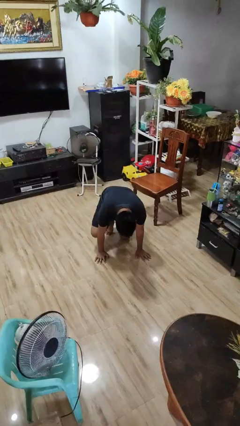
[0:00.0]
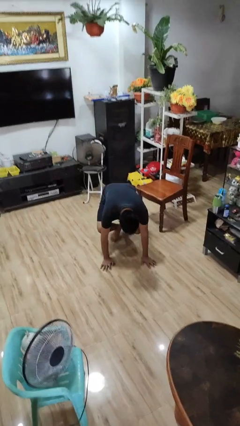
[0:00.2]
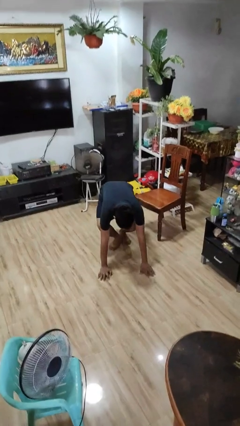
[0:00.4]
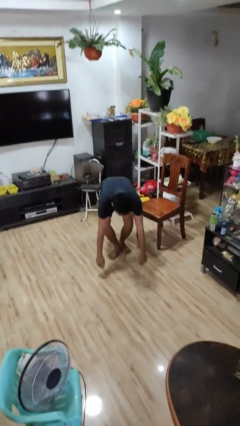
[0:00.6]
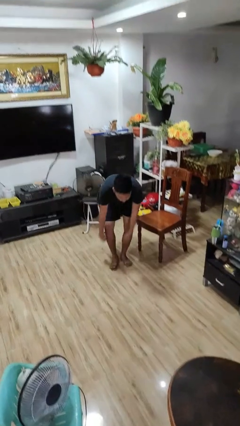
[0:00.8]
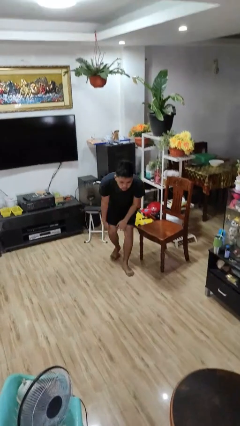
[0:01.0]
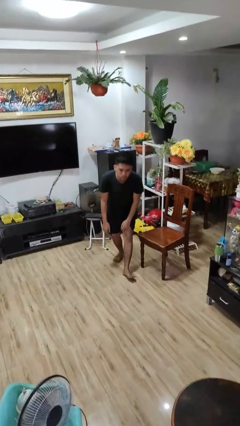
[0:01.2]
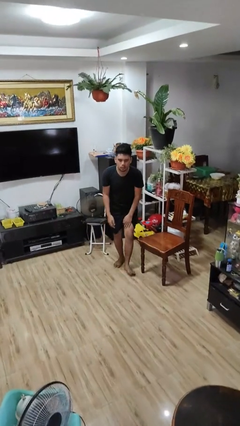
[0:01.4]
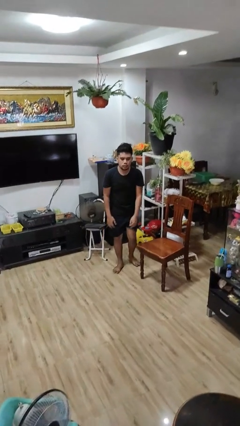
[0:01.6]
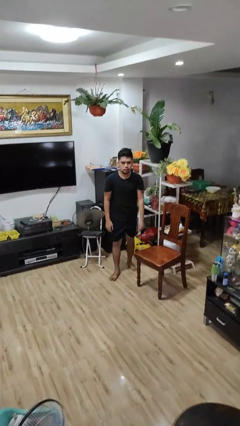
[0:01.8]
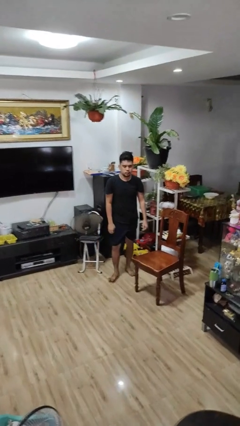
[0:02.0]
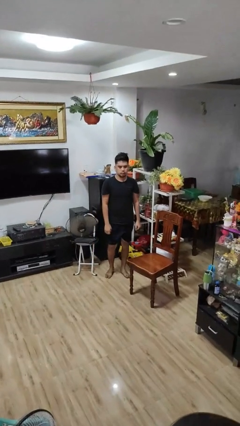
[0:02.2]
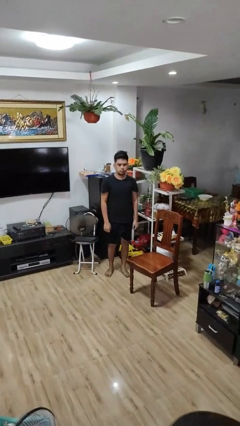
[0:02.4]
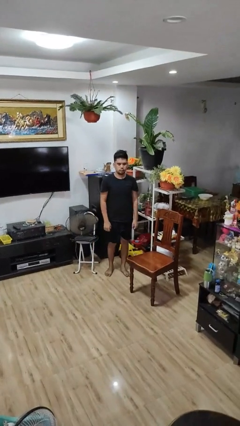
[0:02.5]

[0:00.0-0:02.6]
person stands up from floor

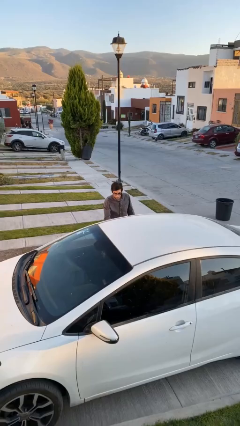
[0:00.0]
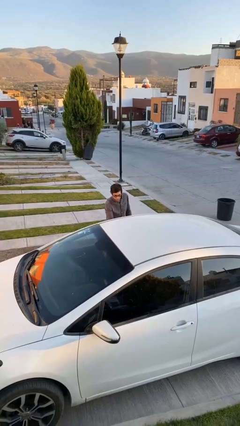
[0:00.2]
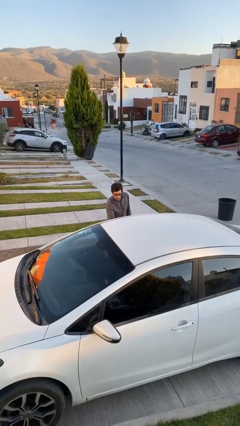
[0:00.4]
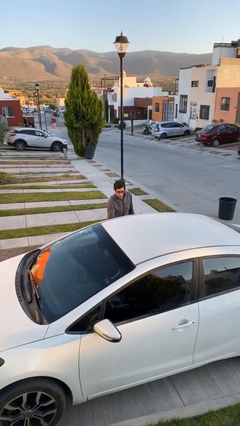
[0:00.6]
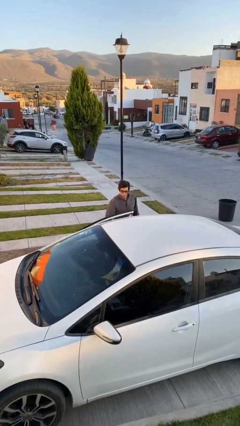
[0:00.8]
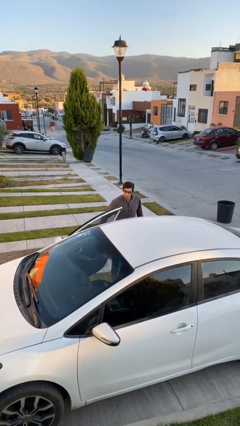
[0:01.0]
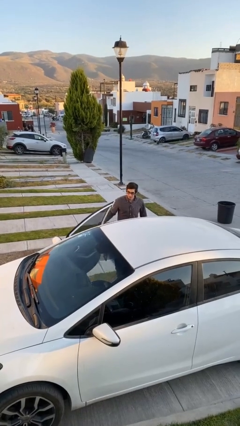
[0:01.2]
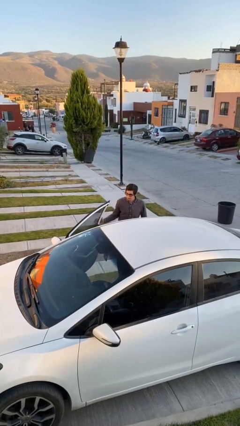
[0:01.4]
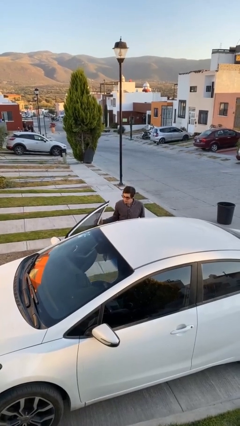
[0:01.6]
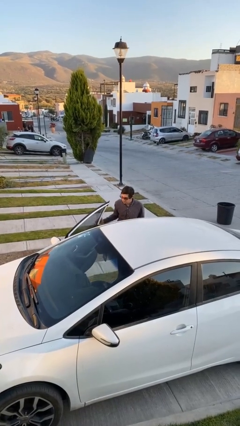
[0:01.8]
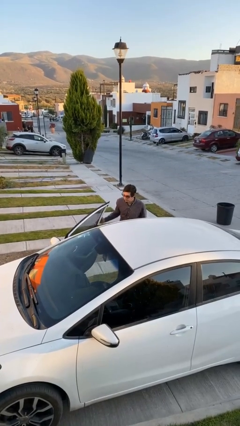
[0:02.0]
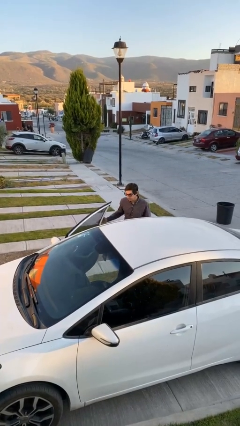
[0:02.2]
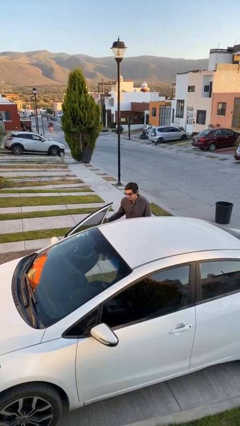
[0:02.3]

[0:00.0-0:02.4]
person opens car door

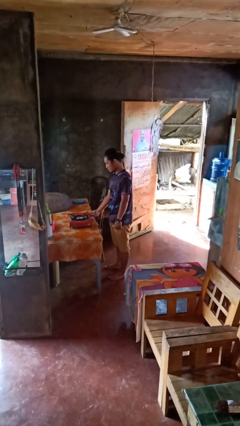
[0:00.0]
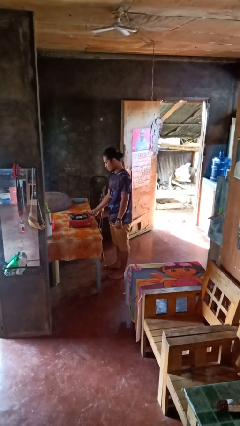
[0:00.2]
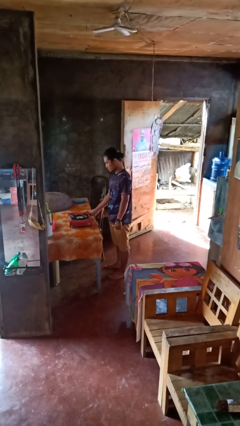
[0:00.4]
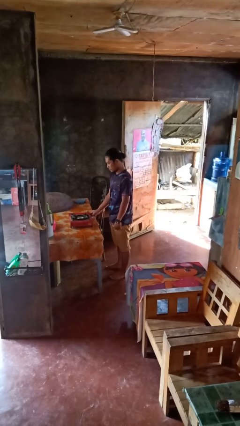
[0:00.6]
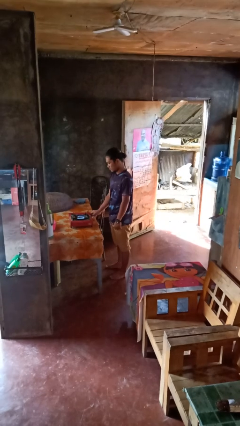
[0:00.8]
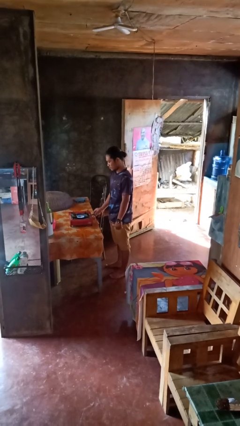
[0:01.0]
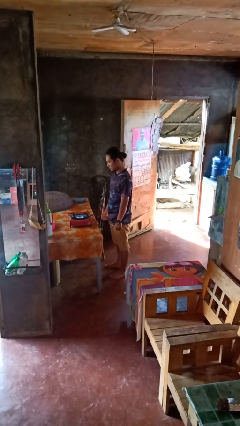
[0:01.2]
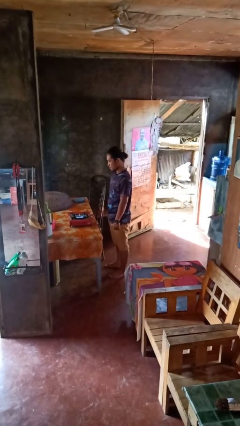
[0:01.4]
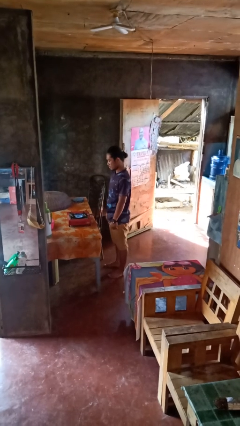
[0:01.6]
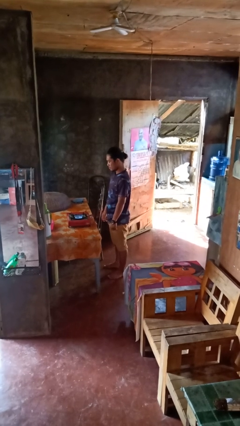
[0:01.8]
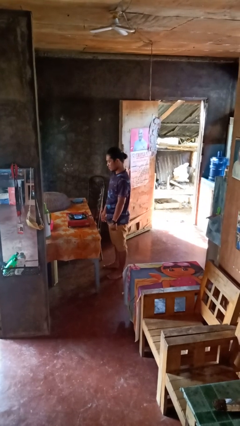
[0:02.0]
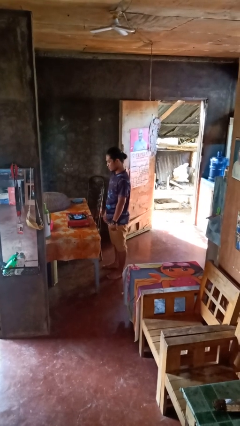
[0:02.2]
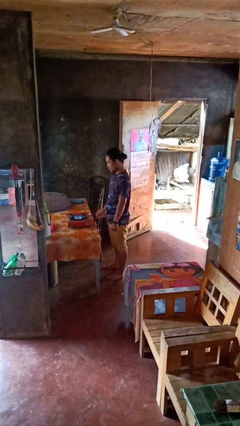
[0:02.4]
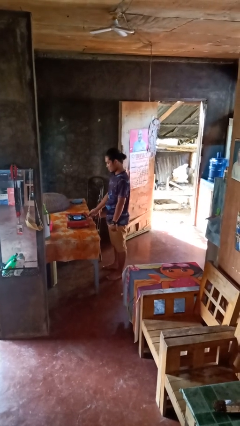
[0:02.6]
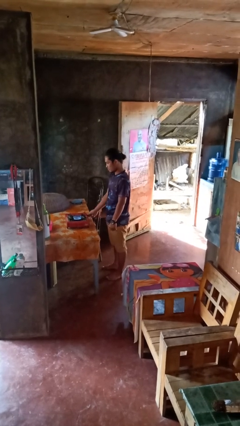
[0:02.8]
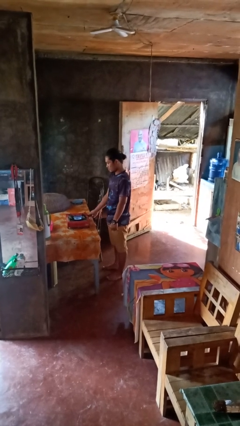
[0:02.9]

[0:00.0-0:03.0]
person turns on stovetop

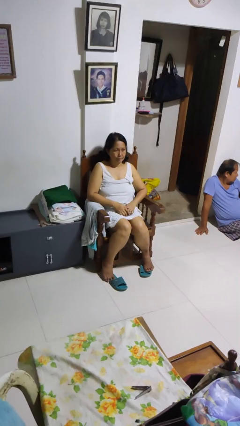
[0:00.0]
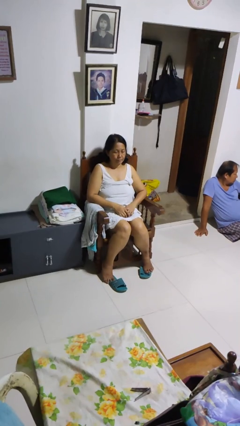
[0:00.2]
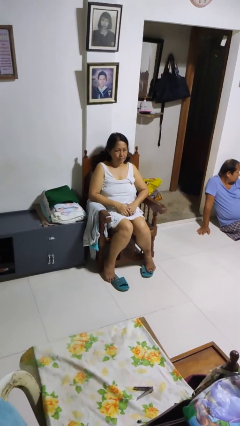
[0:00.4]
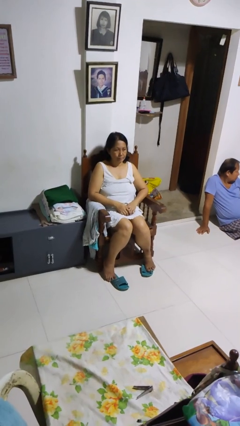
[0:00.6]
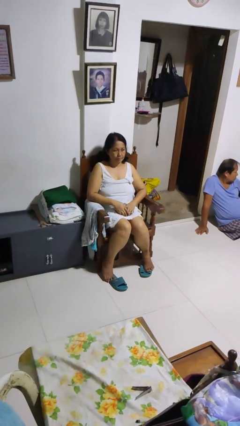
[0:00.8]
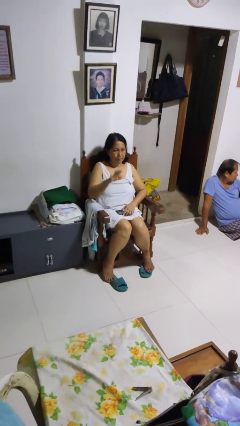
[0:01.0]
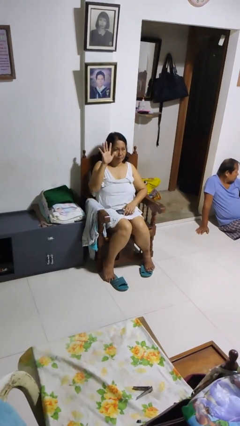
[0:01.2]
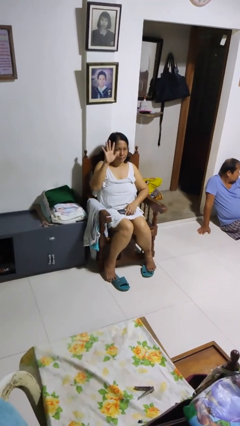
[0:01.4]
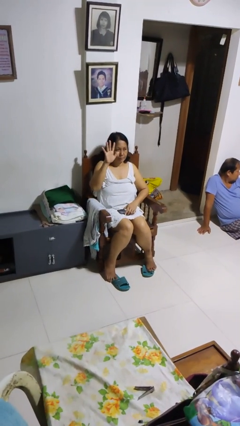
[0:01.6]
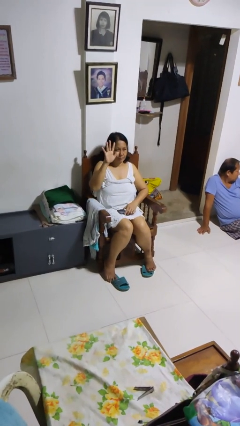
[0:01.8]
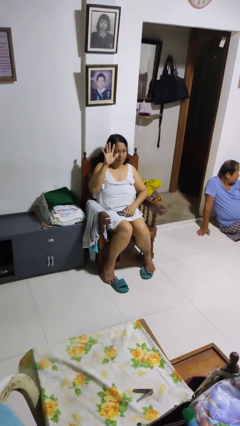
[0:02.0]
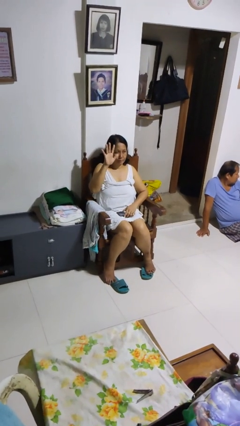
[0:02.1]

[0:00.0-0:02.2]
person gestures number five

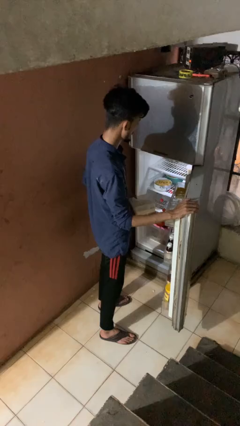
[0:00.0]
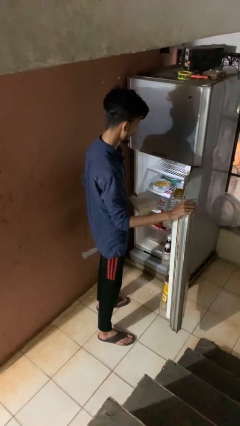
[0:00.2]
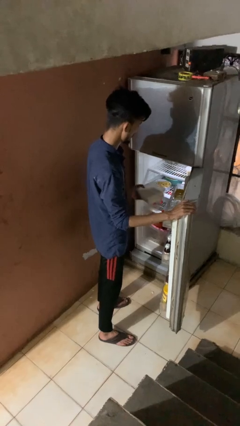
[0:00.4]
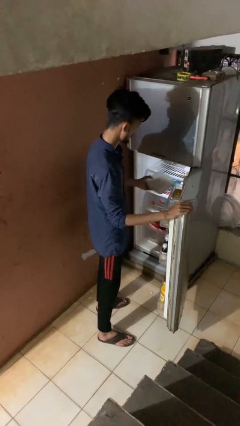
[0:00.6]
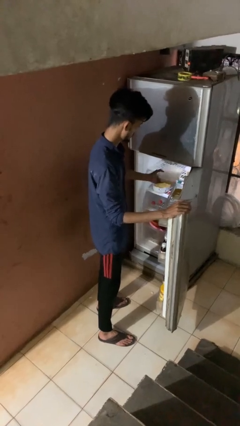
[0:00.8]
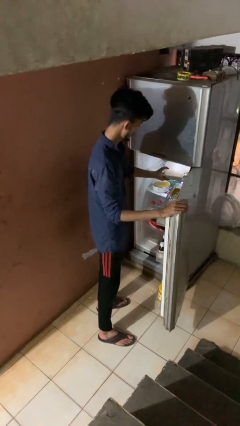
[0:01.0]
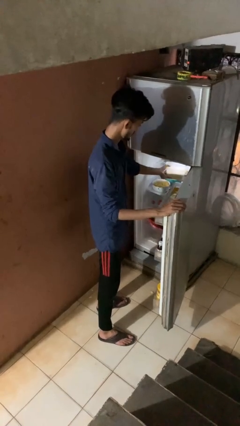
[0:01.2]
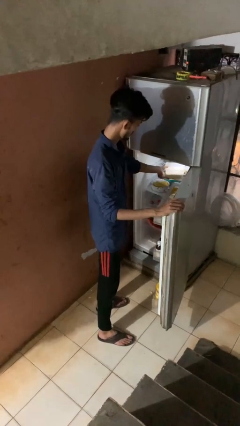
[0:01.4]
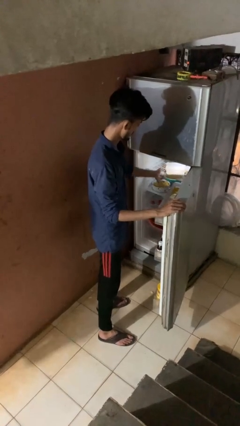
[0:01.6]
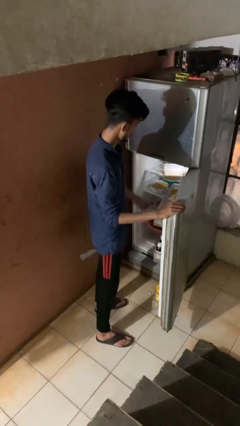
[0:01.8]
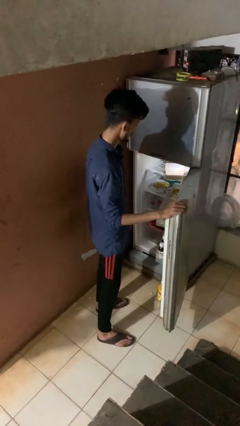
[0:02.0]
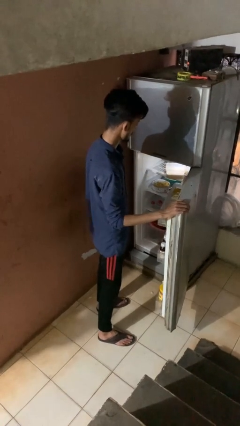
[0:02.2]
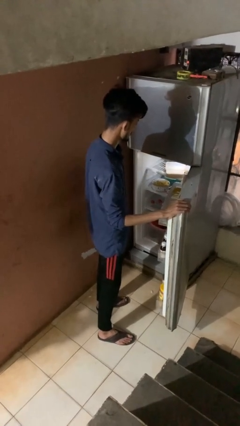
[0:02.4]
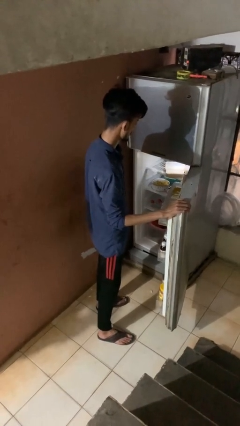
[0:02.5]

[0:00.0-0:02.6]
person loads groceries into refrigerator

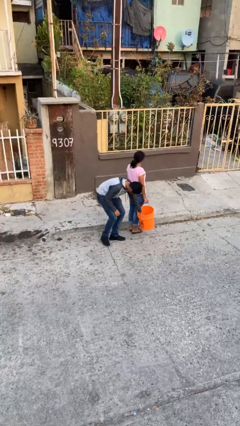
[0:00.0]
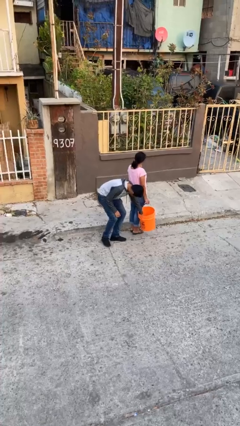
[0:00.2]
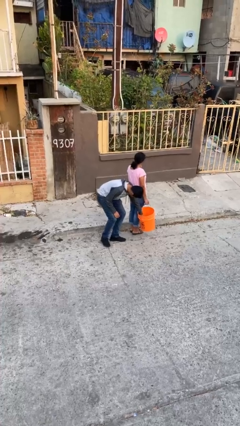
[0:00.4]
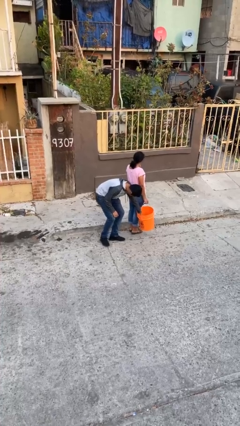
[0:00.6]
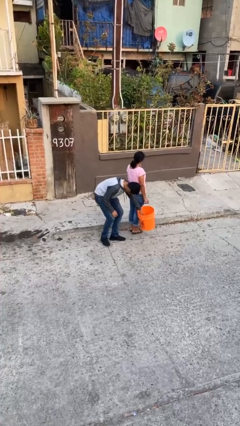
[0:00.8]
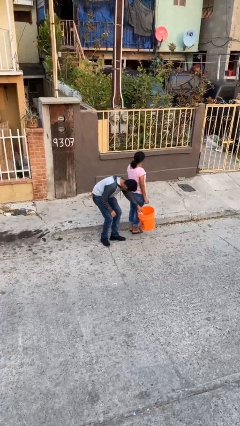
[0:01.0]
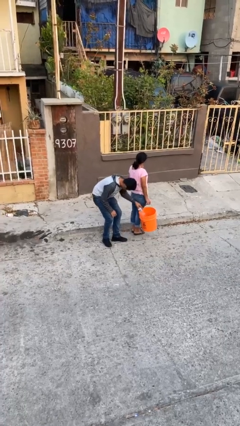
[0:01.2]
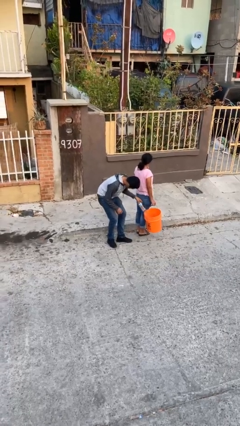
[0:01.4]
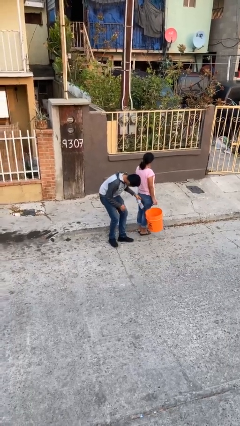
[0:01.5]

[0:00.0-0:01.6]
person steals object from person

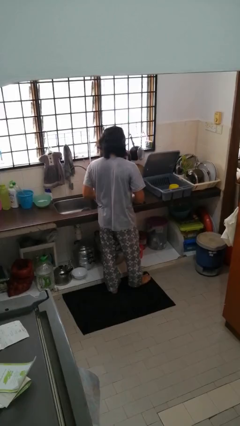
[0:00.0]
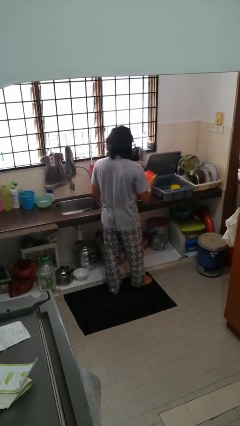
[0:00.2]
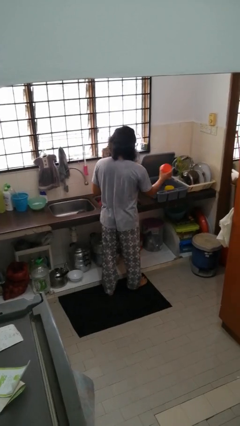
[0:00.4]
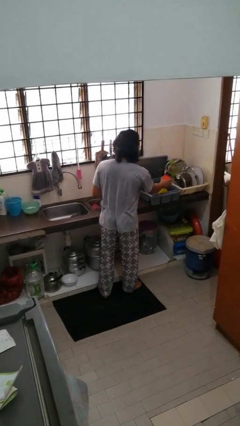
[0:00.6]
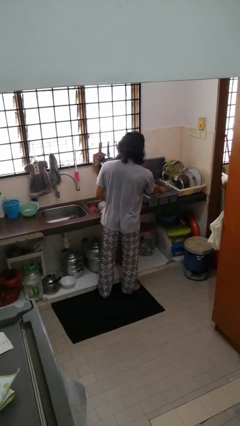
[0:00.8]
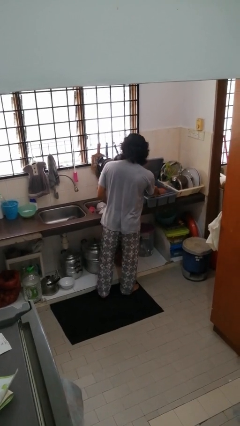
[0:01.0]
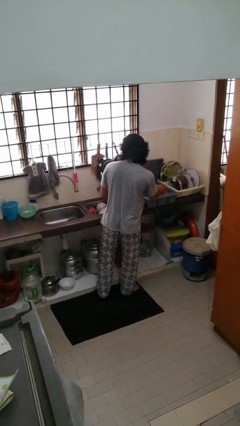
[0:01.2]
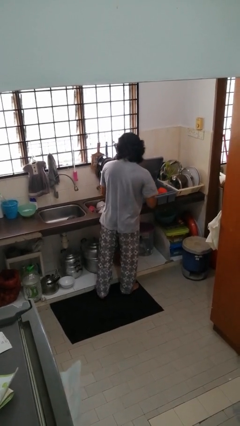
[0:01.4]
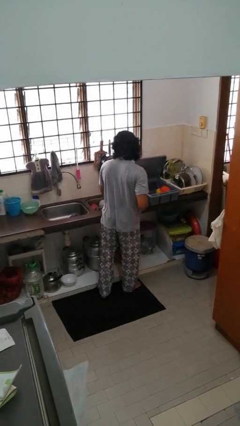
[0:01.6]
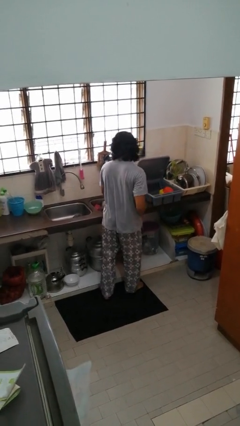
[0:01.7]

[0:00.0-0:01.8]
person loads dishwasher

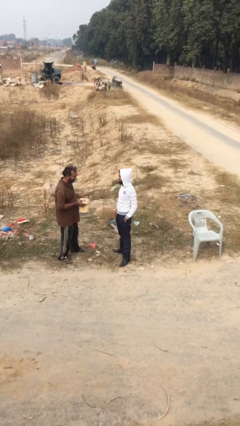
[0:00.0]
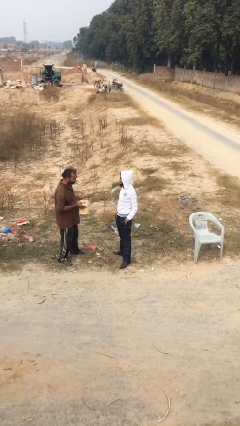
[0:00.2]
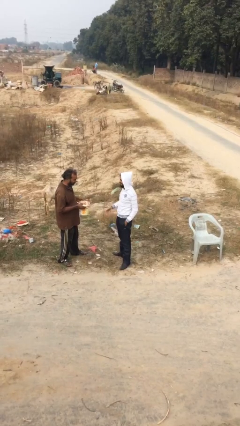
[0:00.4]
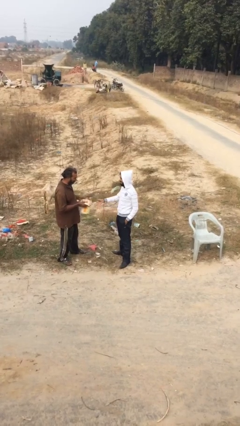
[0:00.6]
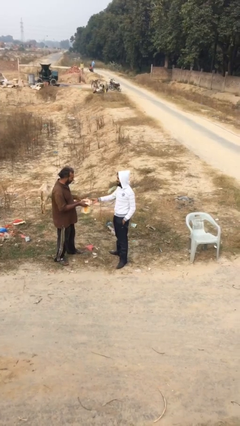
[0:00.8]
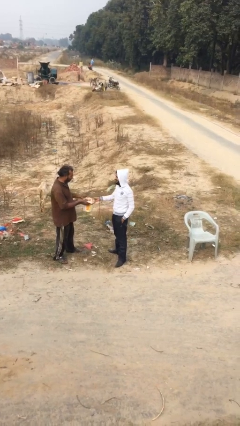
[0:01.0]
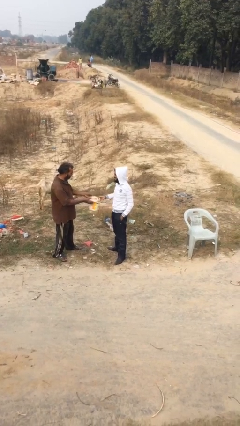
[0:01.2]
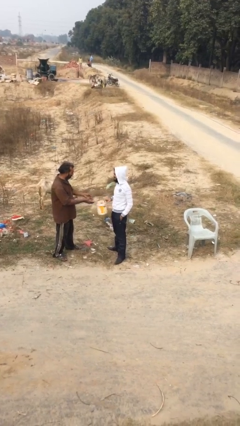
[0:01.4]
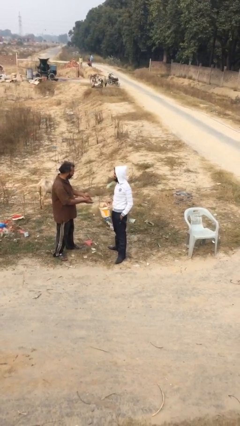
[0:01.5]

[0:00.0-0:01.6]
person transfers object to person
